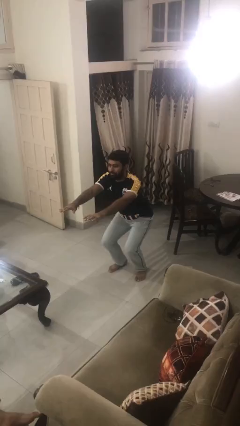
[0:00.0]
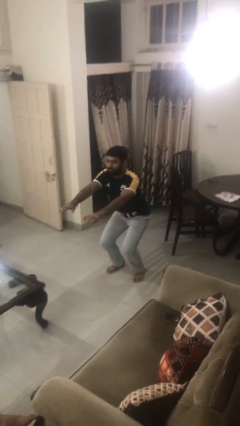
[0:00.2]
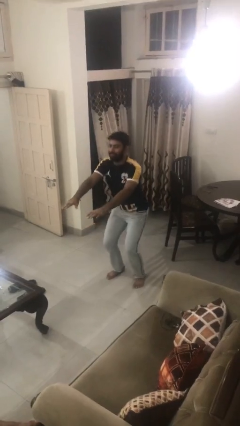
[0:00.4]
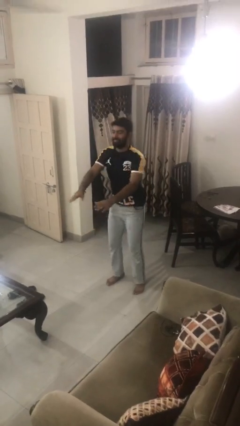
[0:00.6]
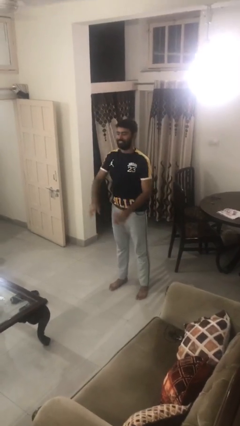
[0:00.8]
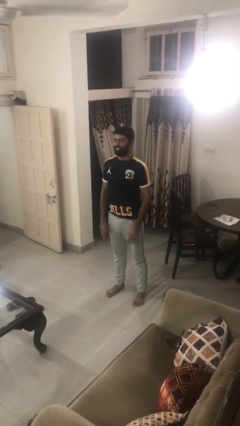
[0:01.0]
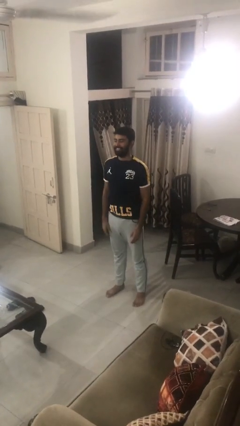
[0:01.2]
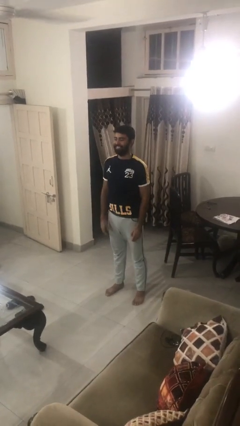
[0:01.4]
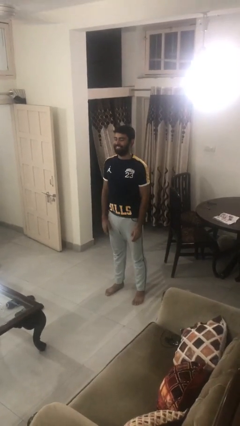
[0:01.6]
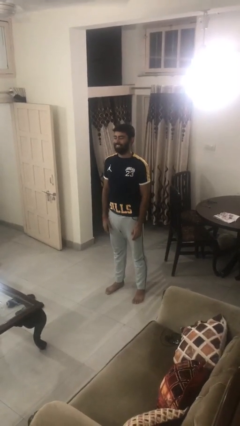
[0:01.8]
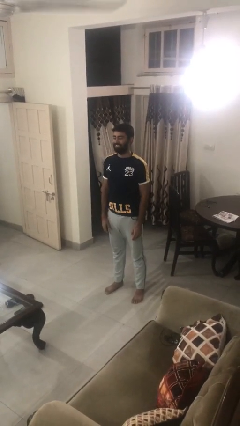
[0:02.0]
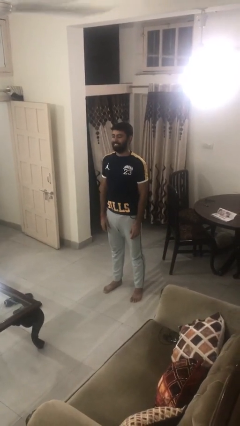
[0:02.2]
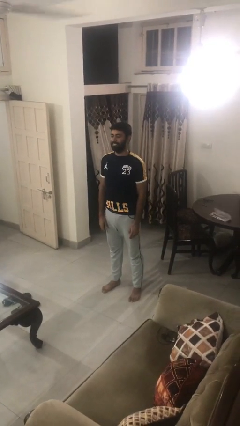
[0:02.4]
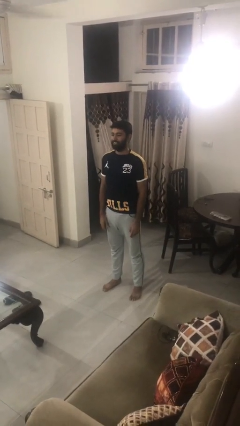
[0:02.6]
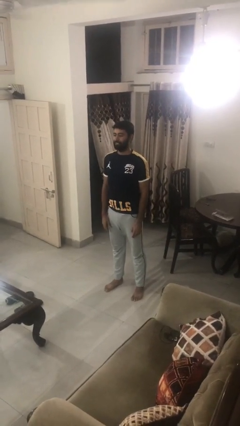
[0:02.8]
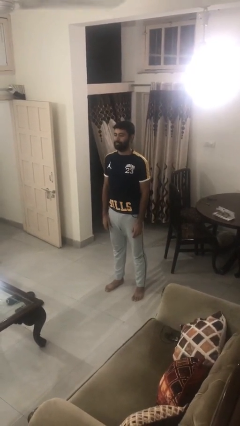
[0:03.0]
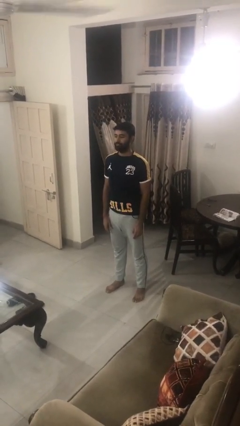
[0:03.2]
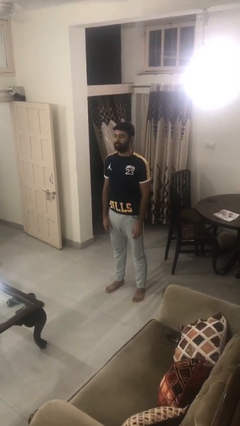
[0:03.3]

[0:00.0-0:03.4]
person stands up

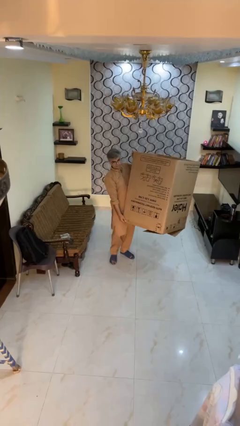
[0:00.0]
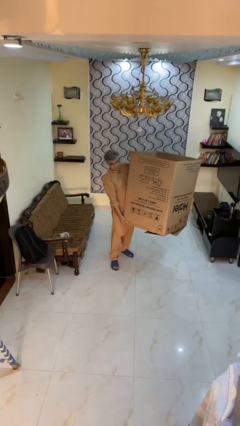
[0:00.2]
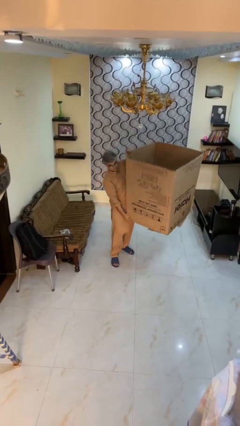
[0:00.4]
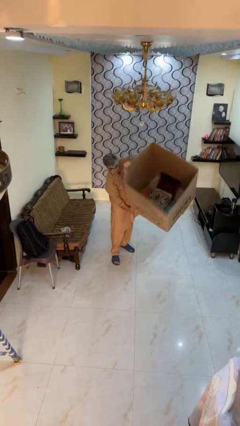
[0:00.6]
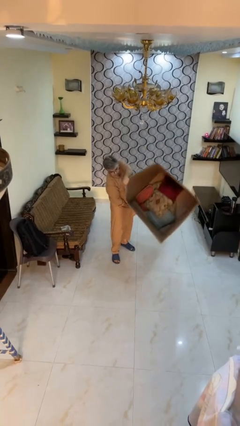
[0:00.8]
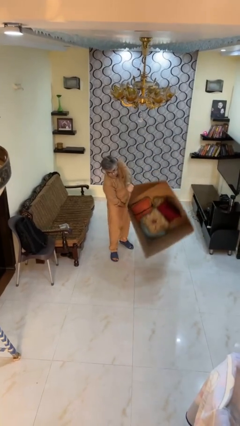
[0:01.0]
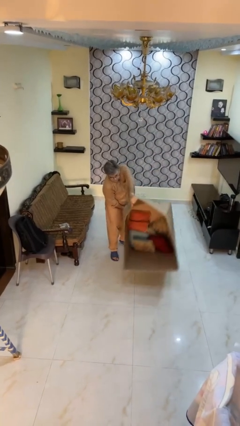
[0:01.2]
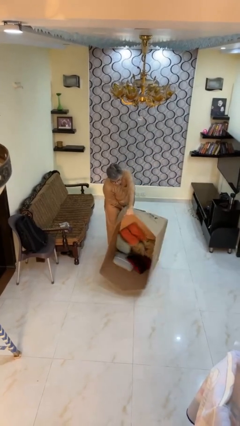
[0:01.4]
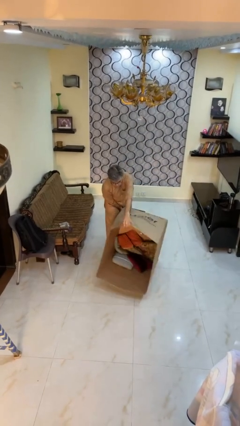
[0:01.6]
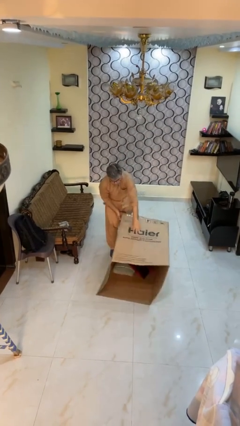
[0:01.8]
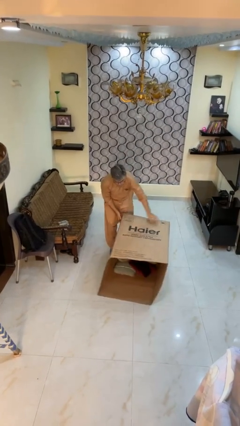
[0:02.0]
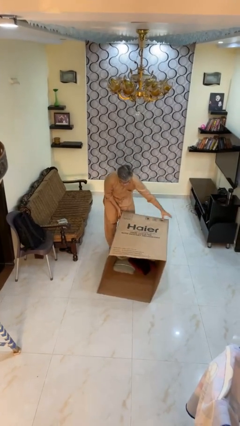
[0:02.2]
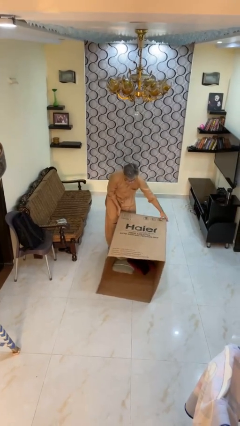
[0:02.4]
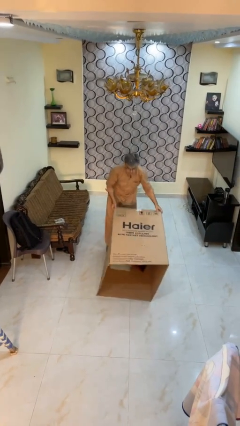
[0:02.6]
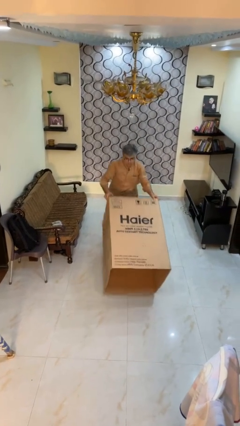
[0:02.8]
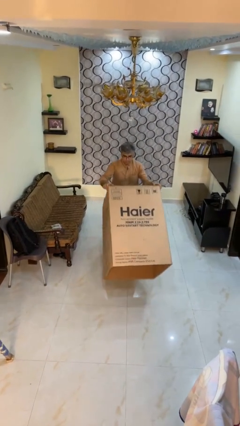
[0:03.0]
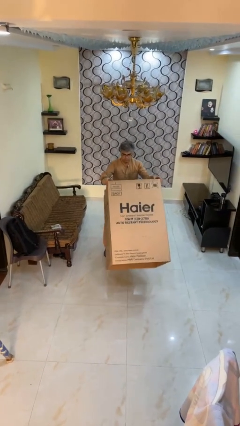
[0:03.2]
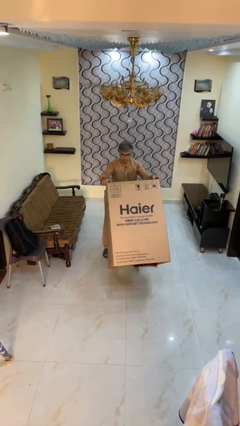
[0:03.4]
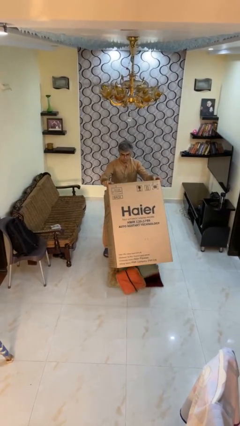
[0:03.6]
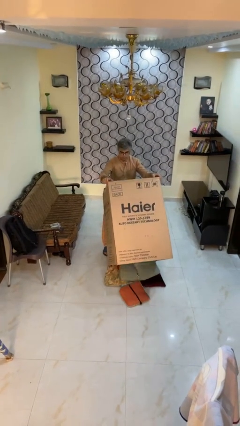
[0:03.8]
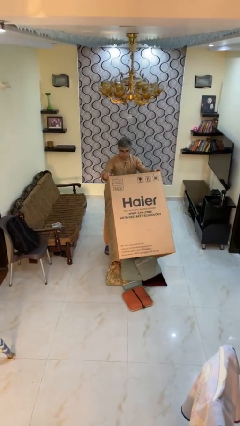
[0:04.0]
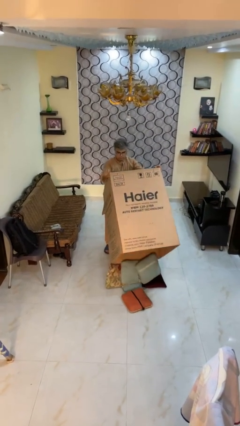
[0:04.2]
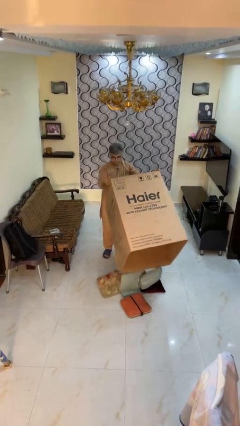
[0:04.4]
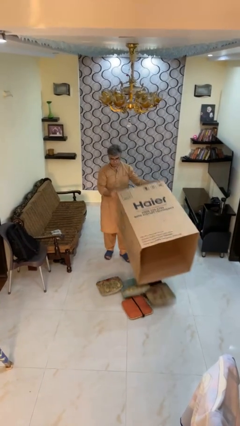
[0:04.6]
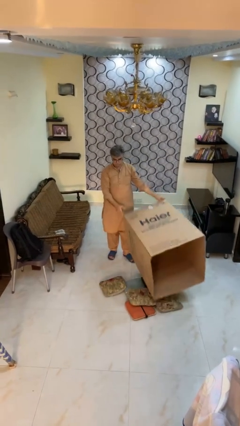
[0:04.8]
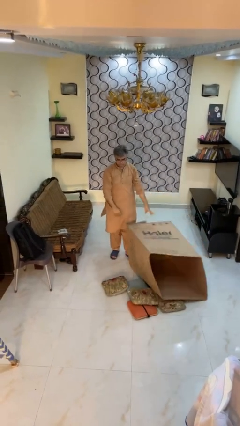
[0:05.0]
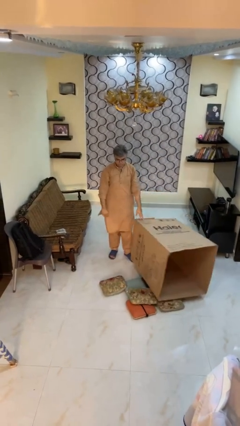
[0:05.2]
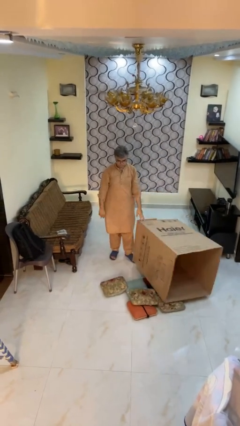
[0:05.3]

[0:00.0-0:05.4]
person unloads box onto floor

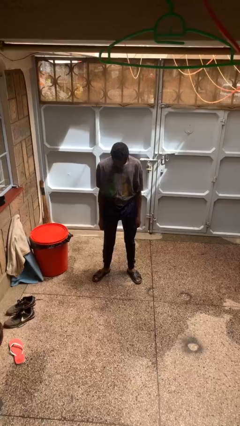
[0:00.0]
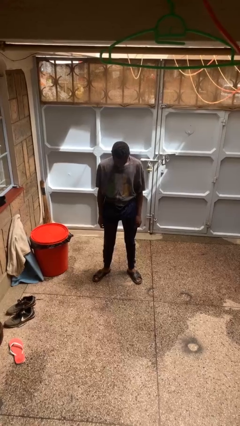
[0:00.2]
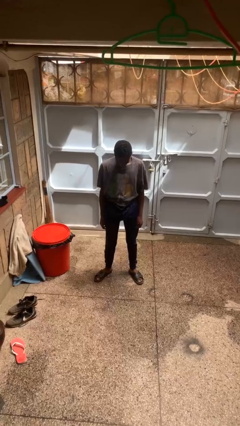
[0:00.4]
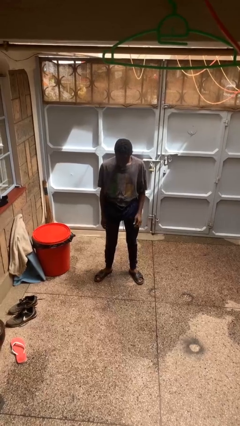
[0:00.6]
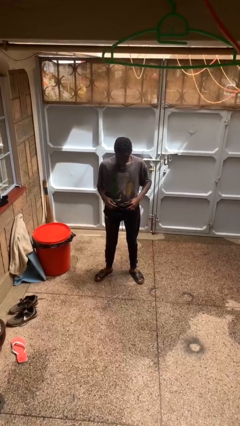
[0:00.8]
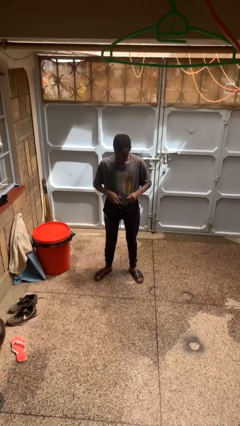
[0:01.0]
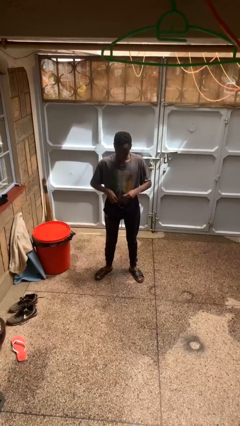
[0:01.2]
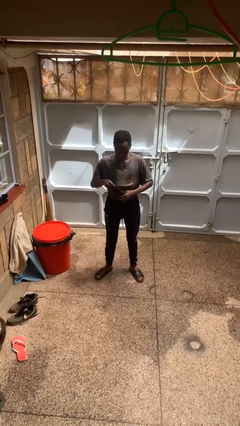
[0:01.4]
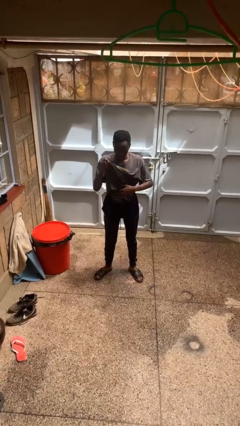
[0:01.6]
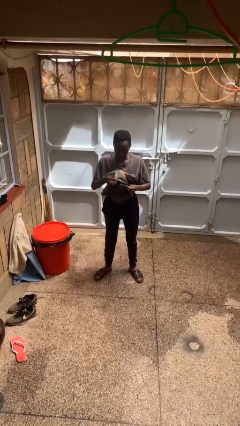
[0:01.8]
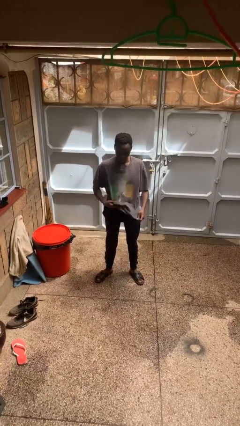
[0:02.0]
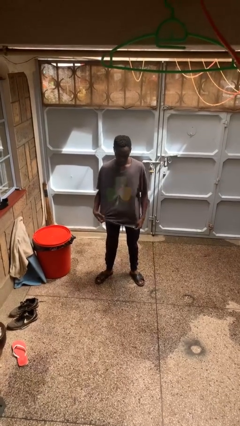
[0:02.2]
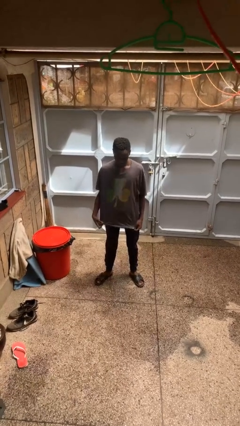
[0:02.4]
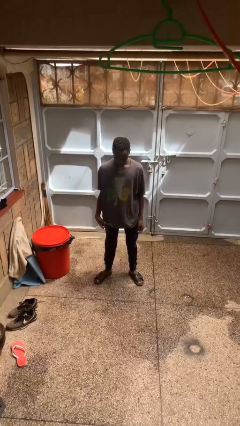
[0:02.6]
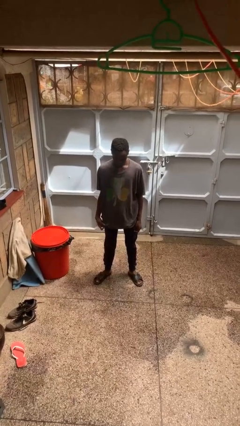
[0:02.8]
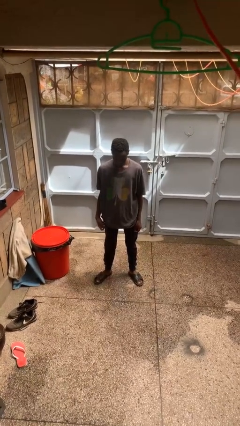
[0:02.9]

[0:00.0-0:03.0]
person untucks shirt

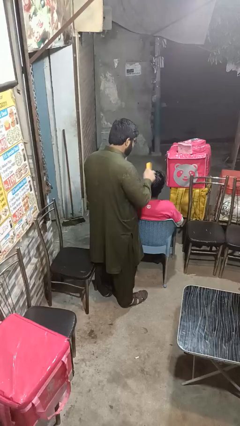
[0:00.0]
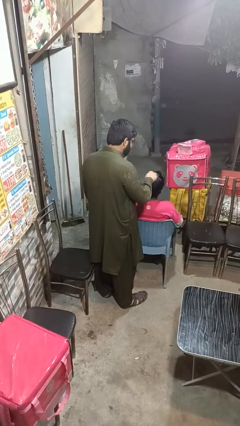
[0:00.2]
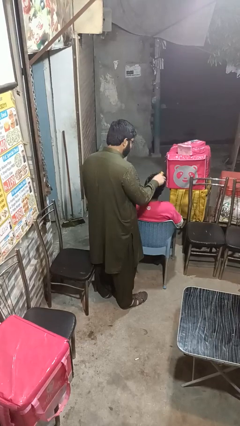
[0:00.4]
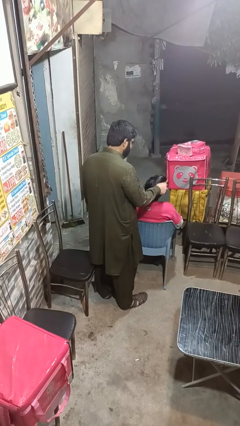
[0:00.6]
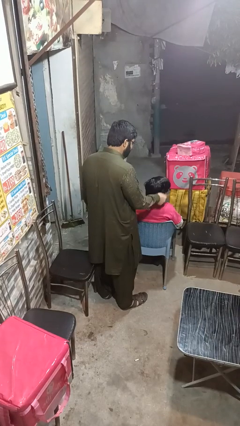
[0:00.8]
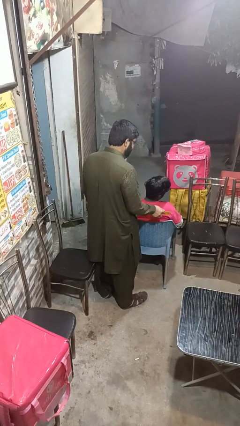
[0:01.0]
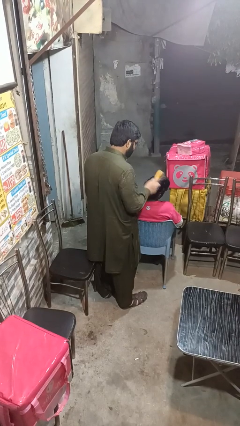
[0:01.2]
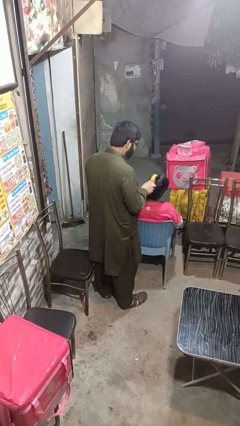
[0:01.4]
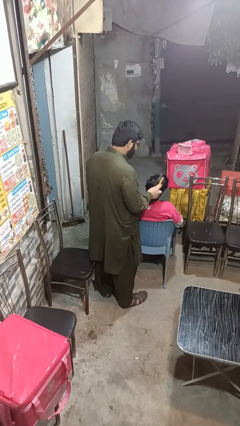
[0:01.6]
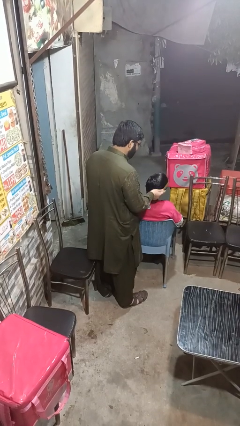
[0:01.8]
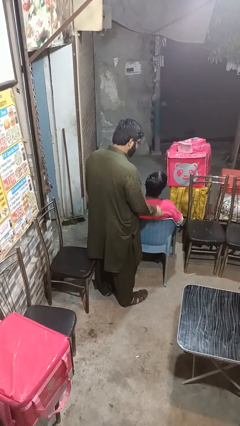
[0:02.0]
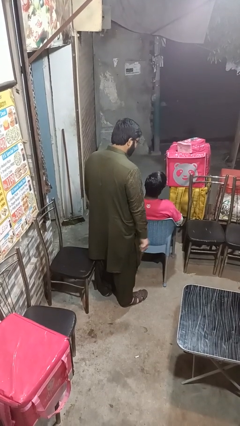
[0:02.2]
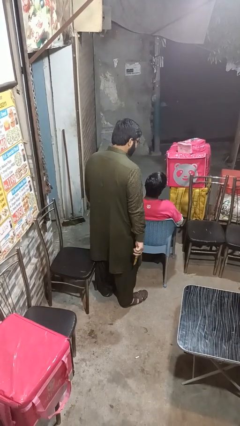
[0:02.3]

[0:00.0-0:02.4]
person brushes hair of person

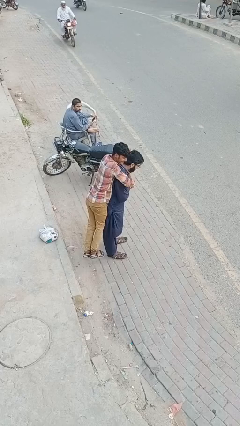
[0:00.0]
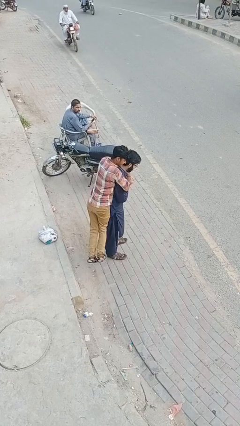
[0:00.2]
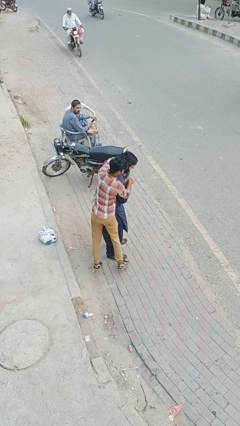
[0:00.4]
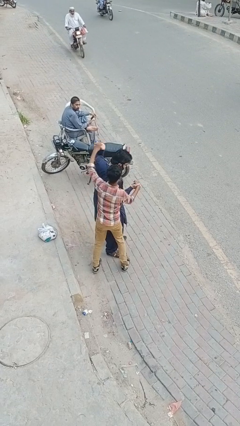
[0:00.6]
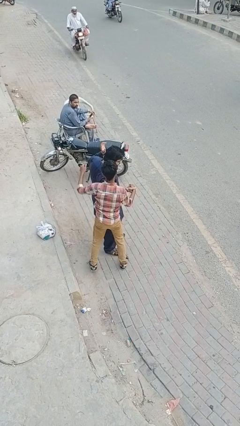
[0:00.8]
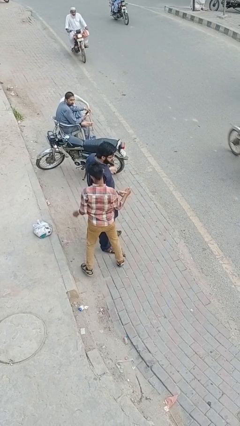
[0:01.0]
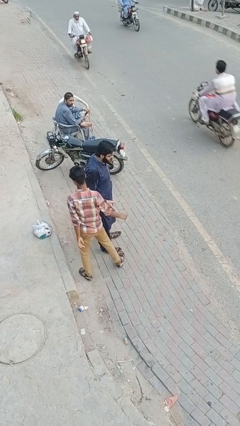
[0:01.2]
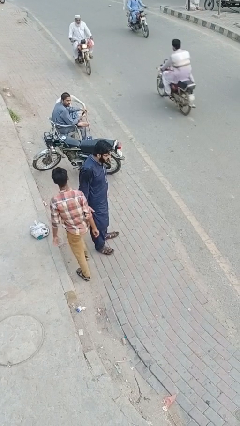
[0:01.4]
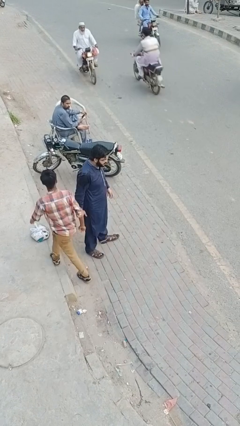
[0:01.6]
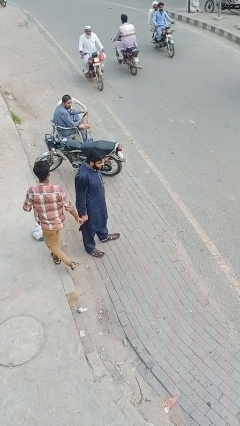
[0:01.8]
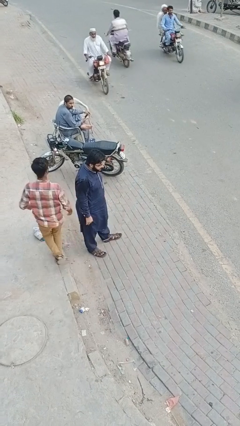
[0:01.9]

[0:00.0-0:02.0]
person puts down person

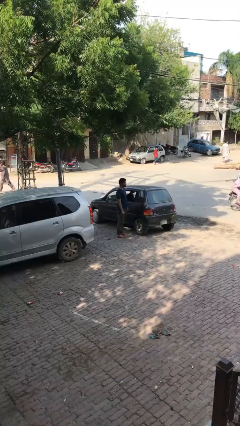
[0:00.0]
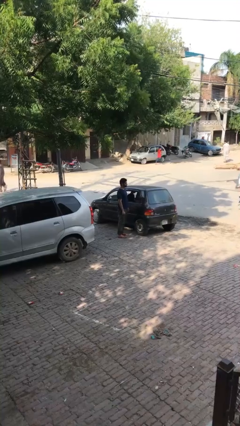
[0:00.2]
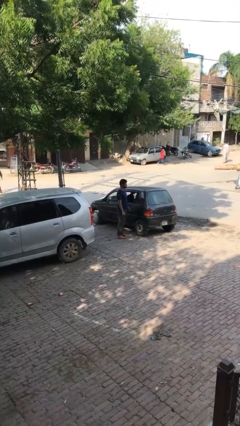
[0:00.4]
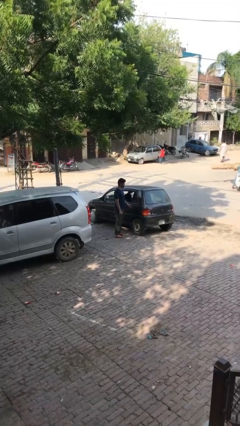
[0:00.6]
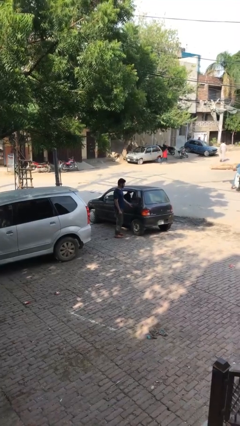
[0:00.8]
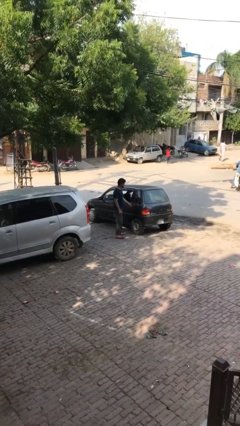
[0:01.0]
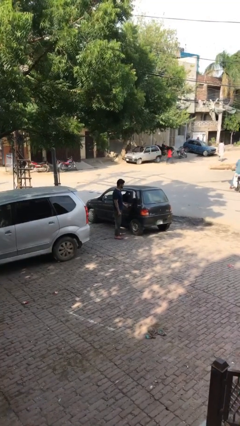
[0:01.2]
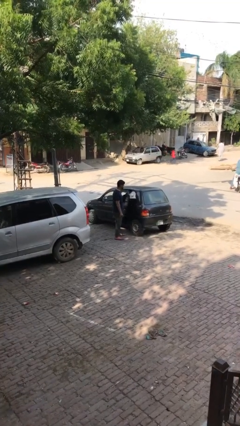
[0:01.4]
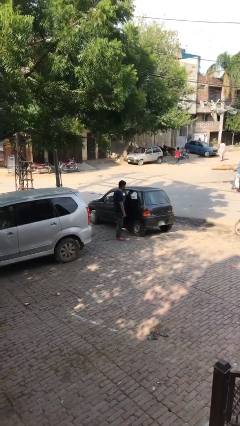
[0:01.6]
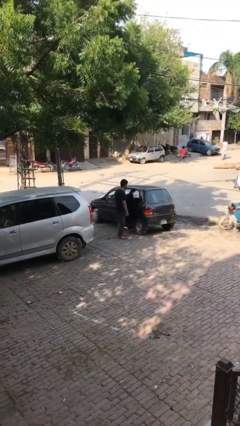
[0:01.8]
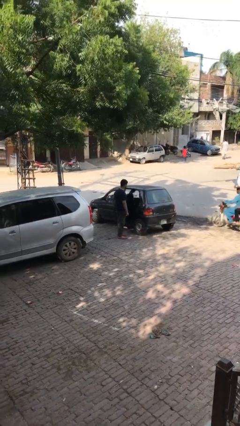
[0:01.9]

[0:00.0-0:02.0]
person opens car door
